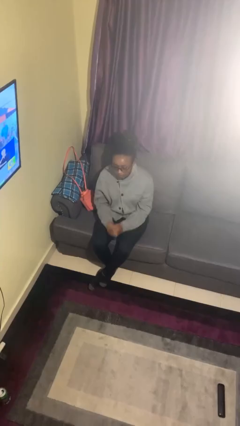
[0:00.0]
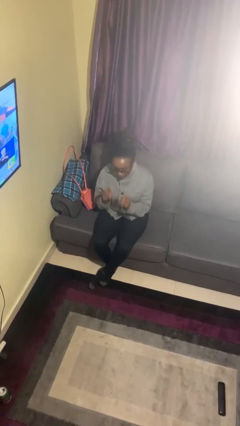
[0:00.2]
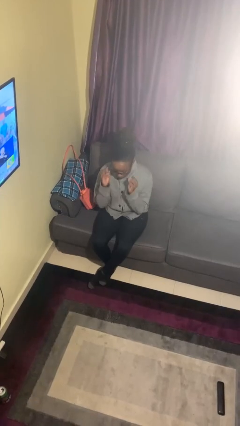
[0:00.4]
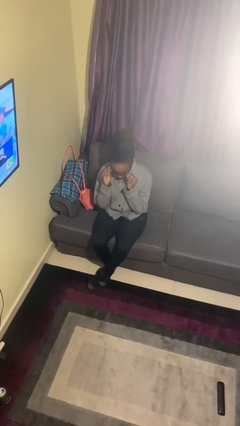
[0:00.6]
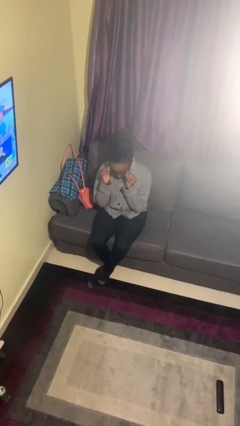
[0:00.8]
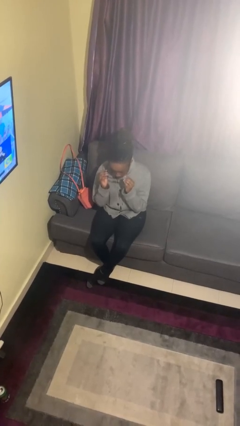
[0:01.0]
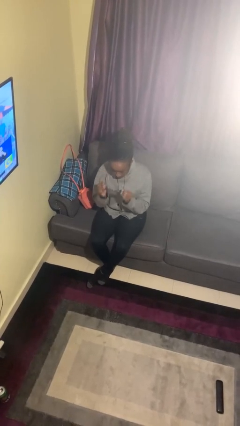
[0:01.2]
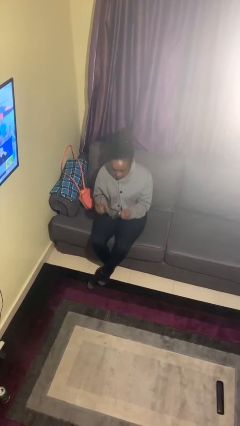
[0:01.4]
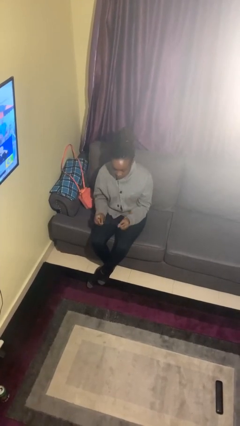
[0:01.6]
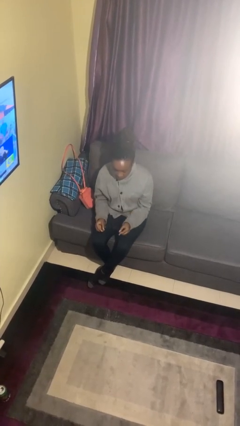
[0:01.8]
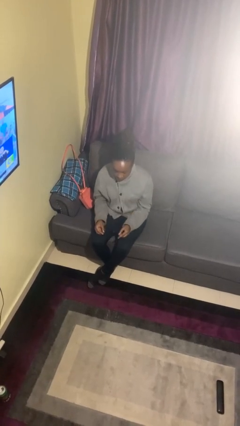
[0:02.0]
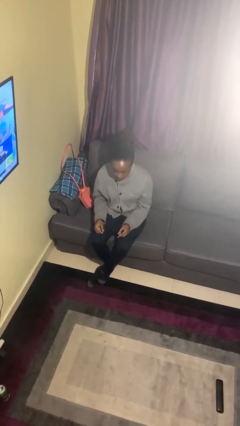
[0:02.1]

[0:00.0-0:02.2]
person takes off glasses

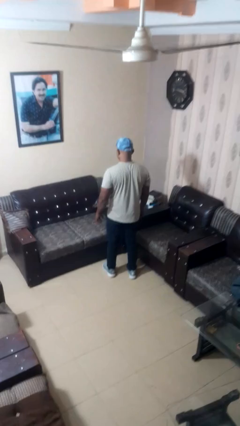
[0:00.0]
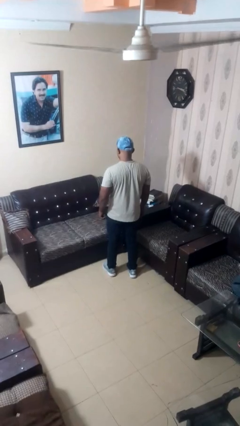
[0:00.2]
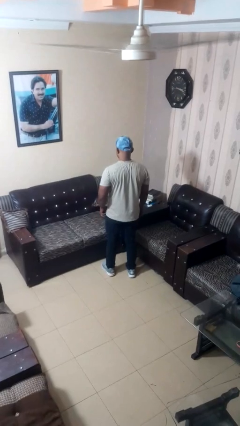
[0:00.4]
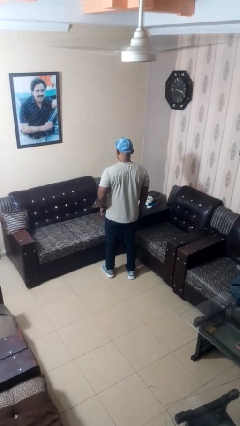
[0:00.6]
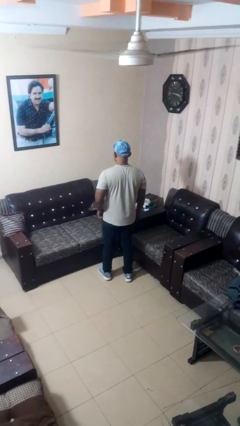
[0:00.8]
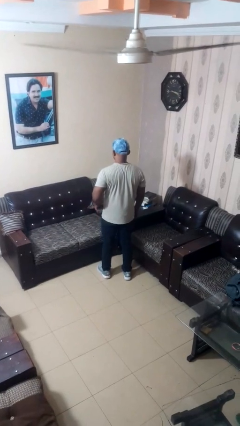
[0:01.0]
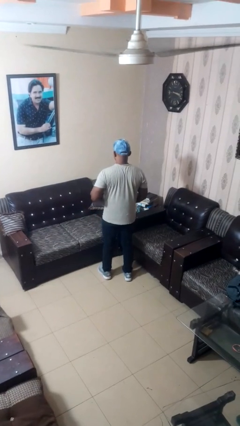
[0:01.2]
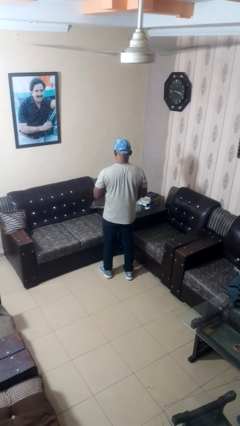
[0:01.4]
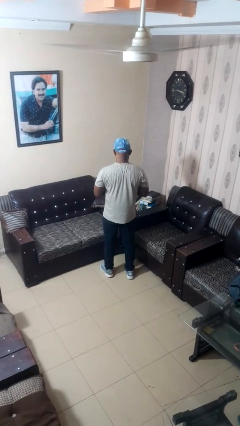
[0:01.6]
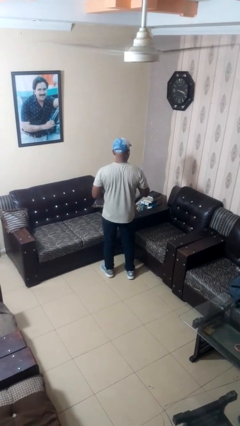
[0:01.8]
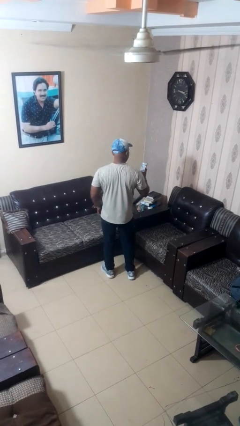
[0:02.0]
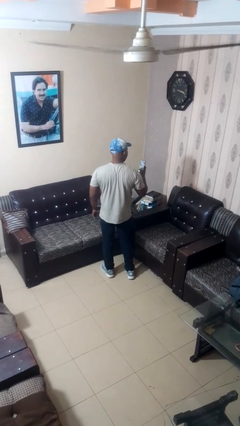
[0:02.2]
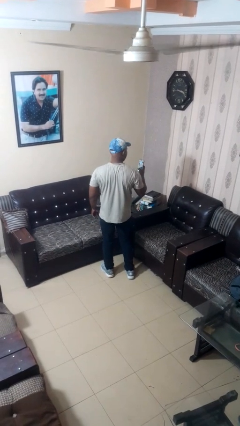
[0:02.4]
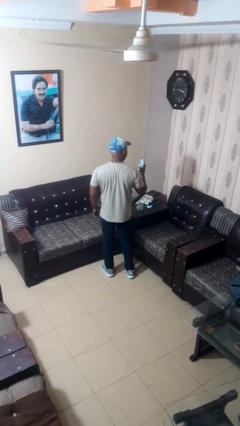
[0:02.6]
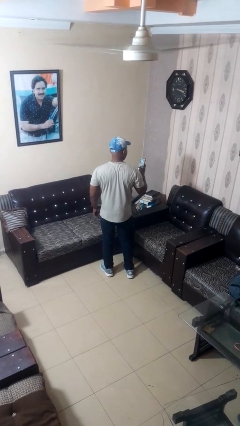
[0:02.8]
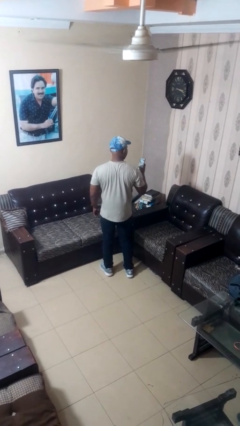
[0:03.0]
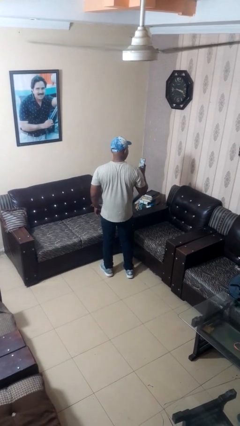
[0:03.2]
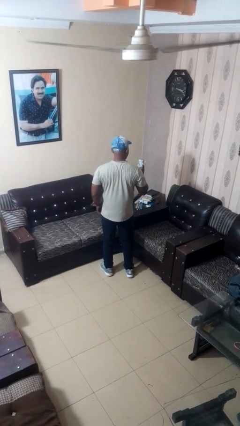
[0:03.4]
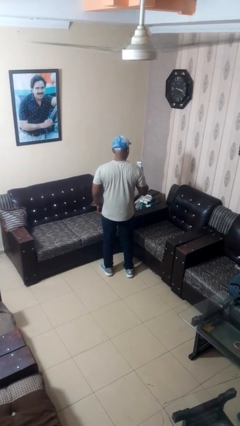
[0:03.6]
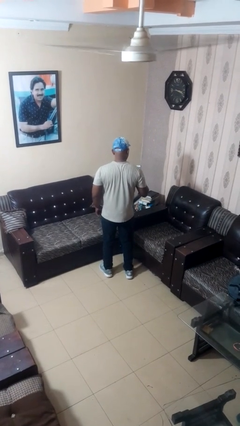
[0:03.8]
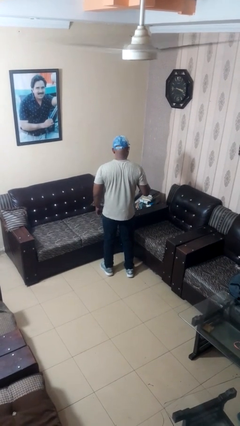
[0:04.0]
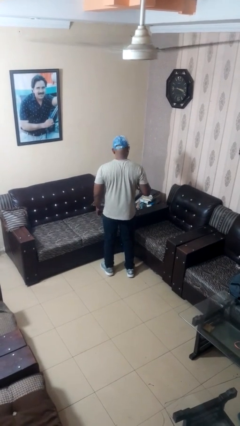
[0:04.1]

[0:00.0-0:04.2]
person takes phone from pocket

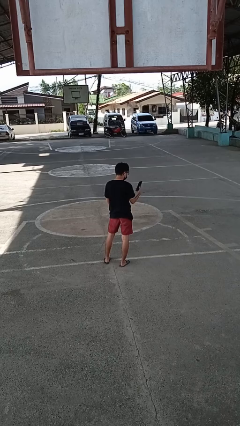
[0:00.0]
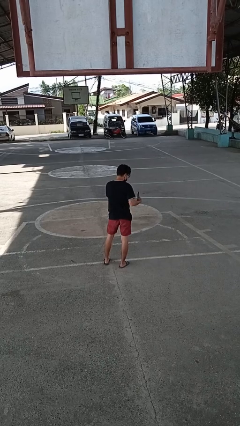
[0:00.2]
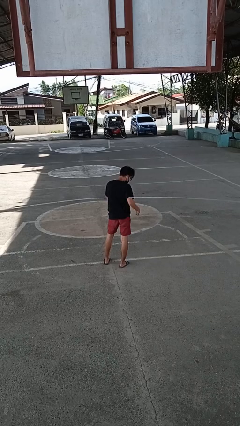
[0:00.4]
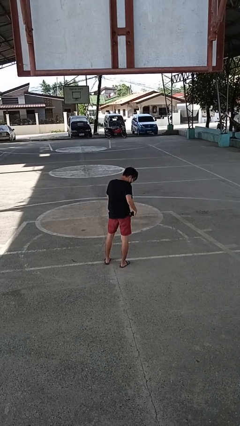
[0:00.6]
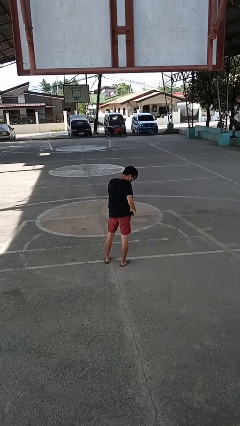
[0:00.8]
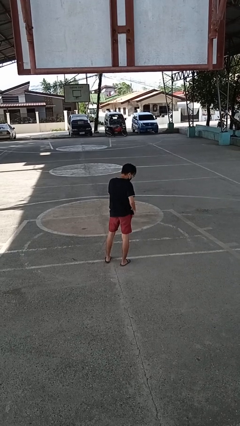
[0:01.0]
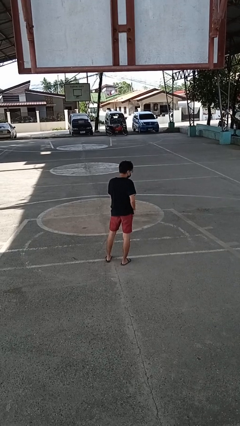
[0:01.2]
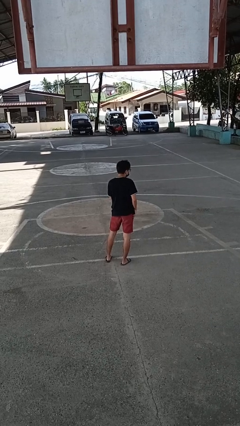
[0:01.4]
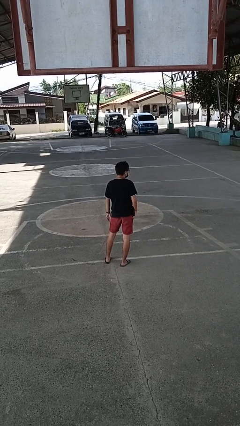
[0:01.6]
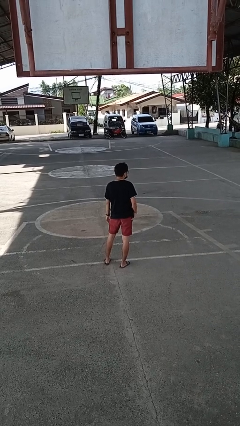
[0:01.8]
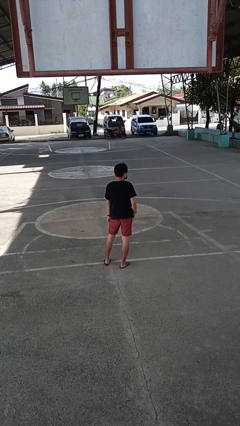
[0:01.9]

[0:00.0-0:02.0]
person puts phone into pocket

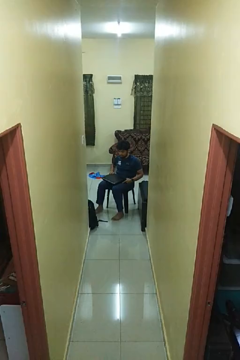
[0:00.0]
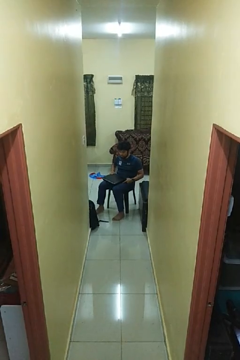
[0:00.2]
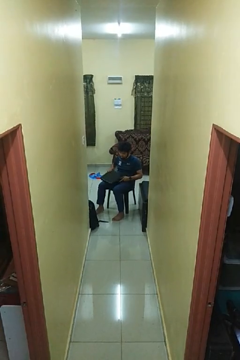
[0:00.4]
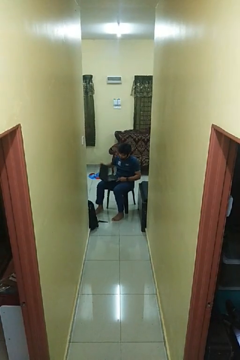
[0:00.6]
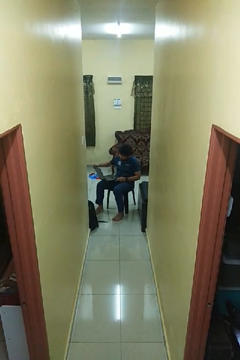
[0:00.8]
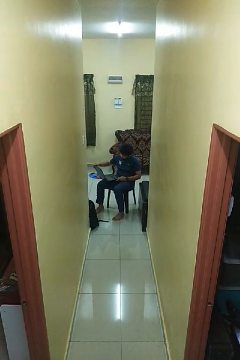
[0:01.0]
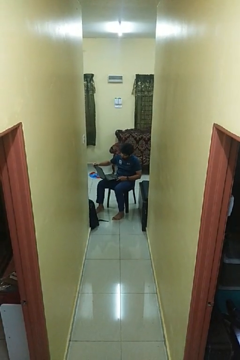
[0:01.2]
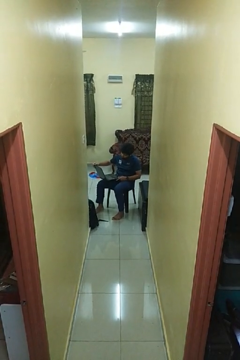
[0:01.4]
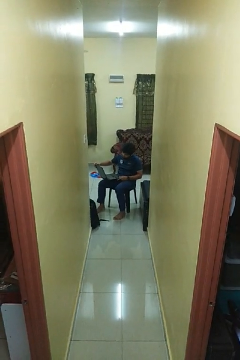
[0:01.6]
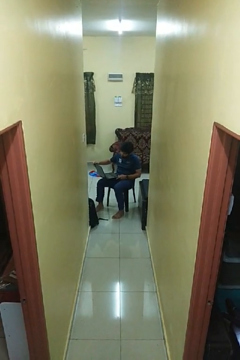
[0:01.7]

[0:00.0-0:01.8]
person opens laptop

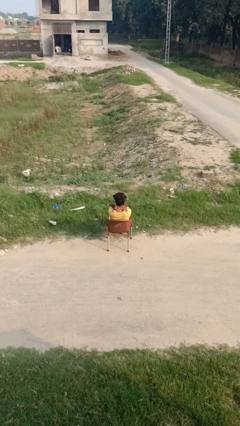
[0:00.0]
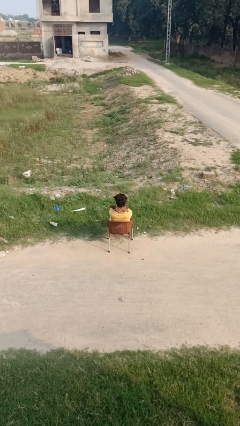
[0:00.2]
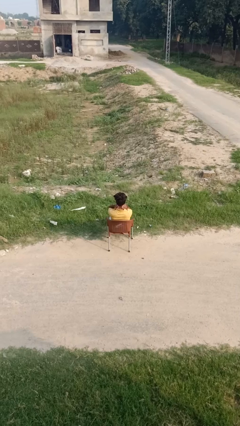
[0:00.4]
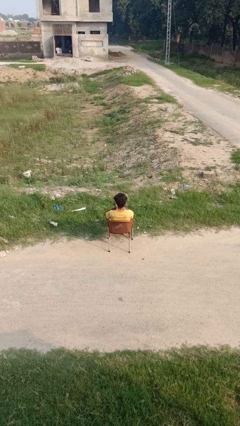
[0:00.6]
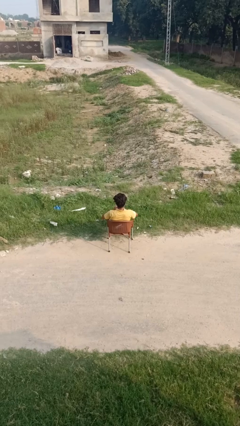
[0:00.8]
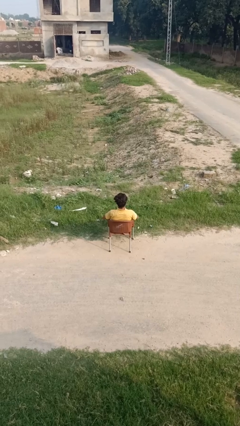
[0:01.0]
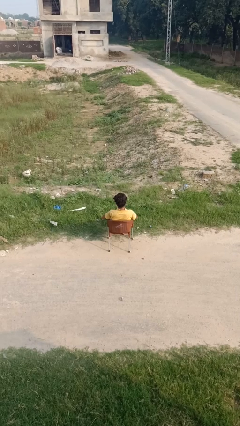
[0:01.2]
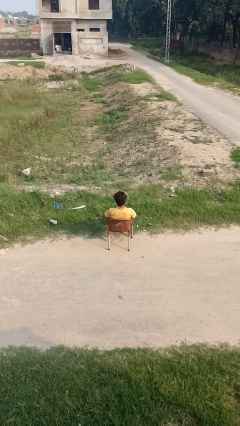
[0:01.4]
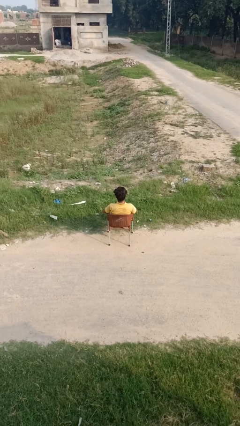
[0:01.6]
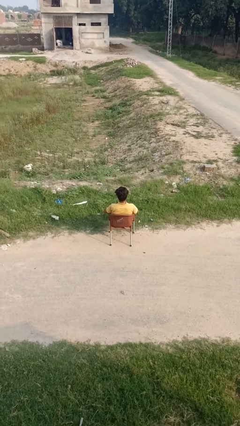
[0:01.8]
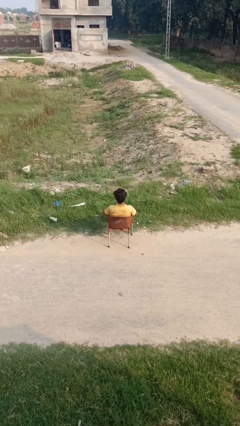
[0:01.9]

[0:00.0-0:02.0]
person shrugs

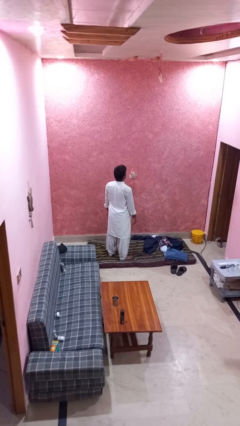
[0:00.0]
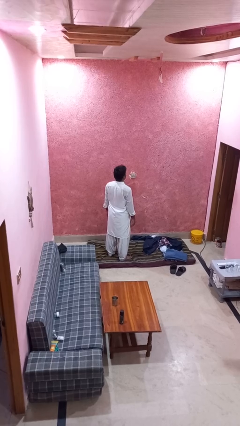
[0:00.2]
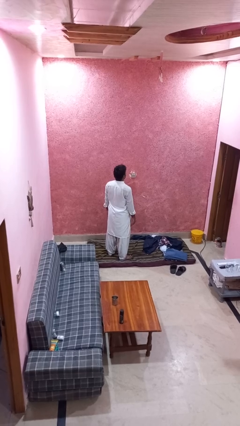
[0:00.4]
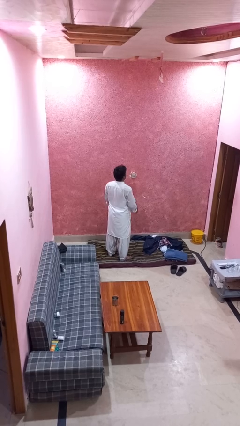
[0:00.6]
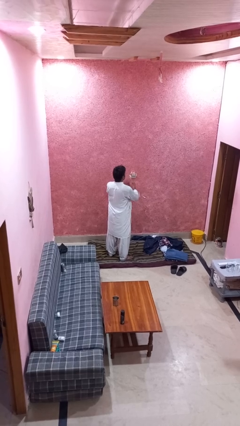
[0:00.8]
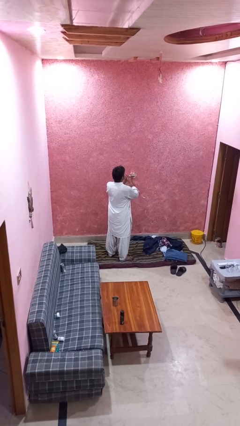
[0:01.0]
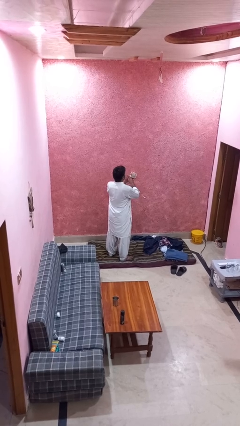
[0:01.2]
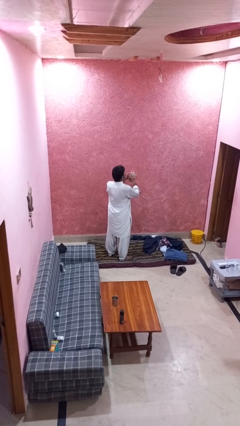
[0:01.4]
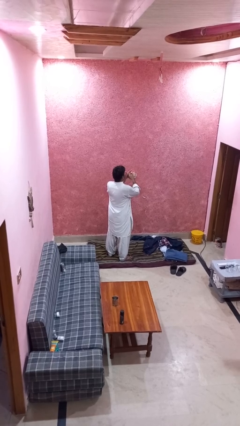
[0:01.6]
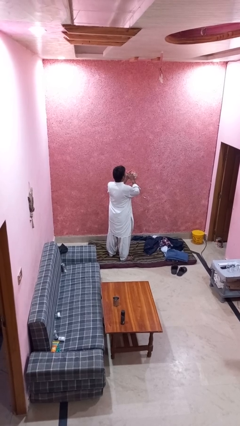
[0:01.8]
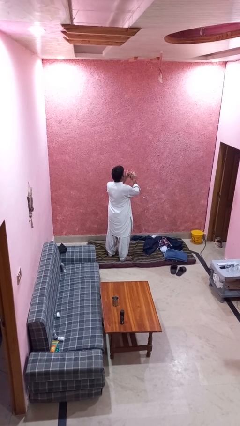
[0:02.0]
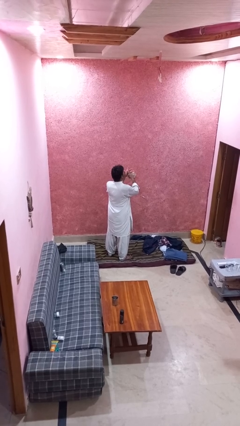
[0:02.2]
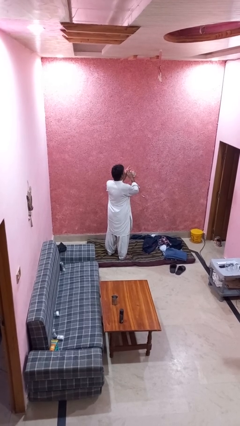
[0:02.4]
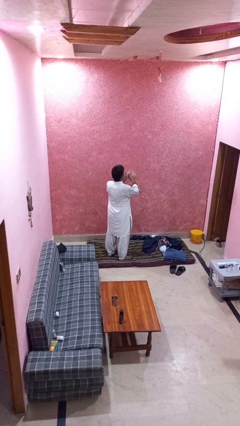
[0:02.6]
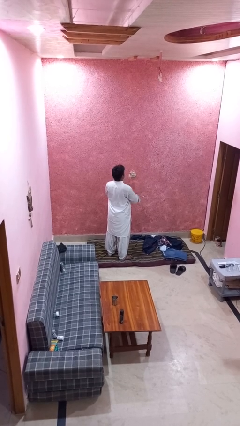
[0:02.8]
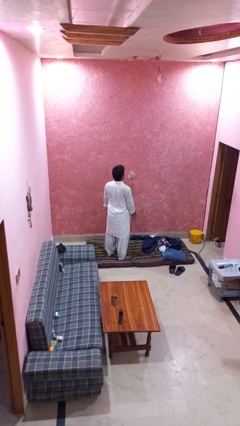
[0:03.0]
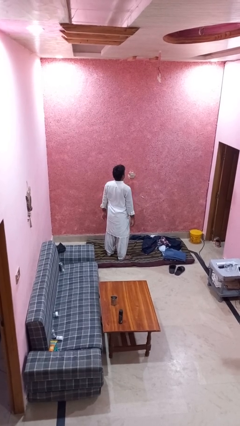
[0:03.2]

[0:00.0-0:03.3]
person snaps fingers

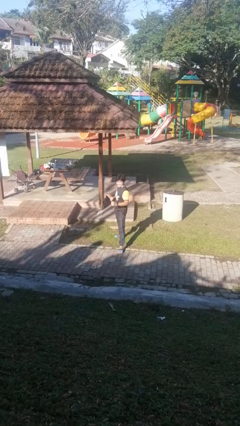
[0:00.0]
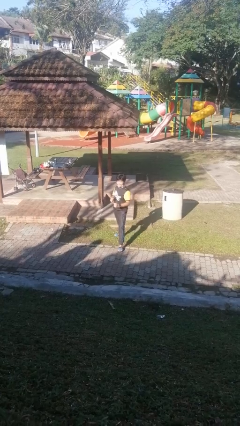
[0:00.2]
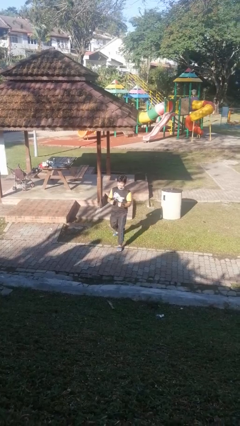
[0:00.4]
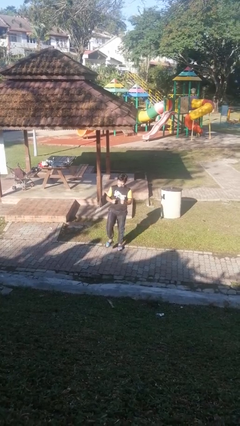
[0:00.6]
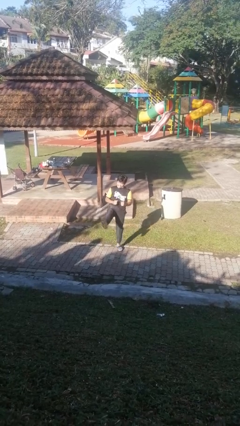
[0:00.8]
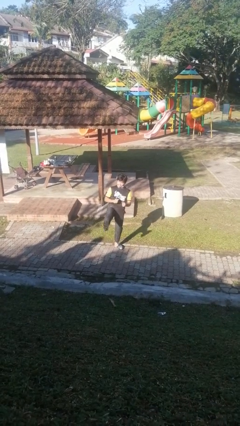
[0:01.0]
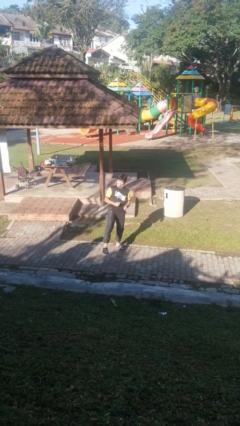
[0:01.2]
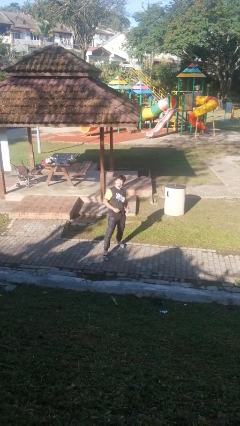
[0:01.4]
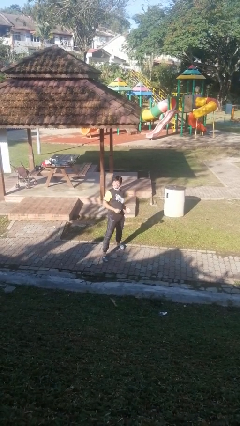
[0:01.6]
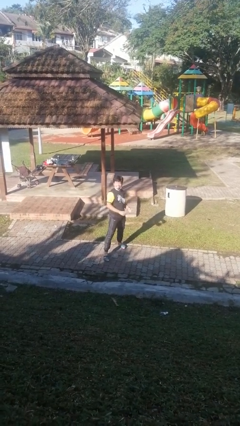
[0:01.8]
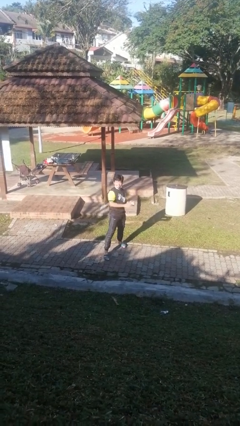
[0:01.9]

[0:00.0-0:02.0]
person karate kicks
